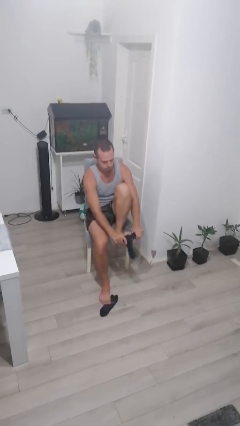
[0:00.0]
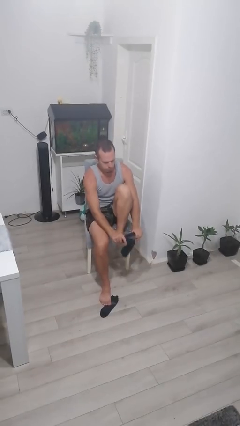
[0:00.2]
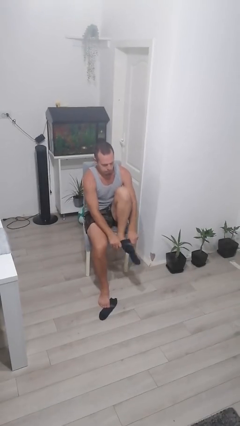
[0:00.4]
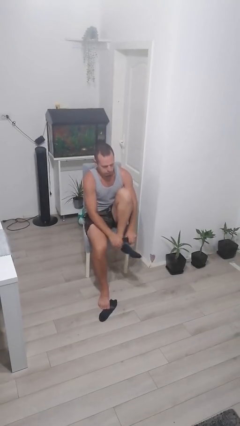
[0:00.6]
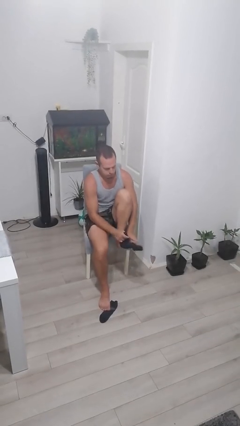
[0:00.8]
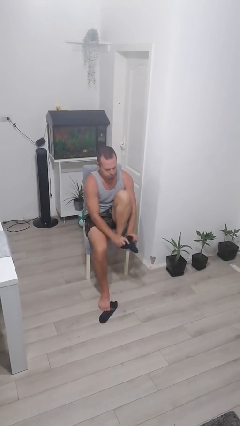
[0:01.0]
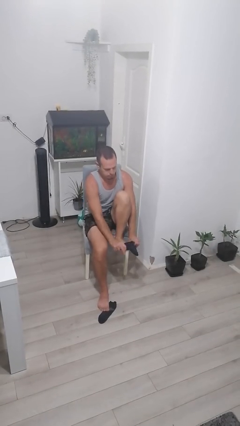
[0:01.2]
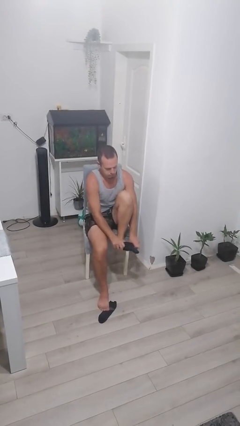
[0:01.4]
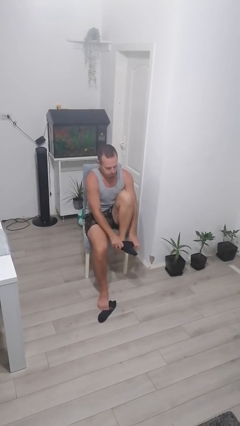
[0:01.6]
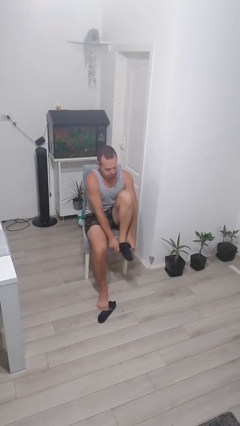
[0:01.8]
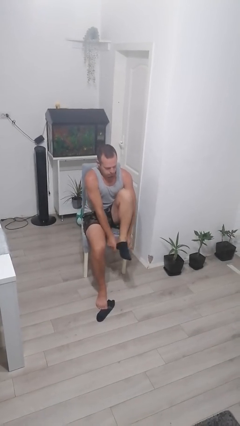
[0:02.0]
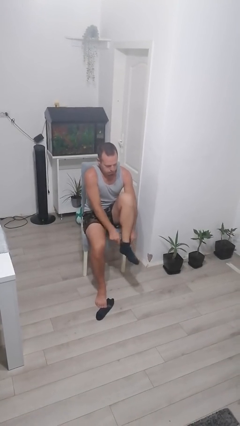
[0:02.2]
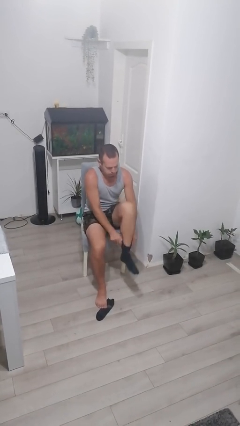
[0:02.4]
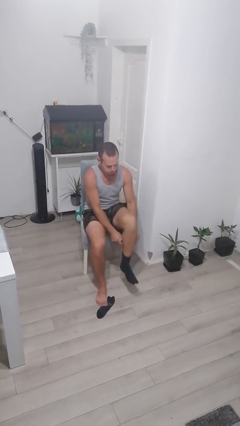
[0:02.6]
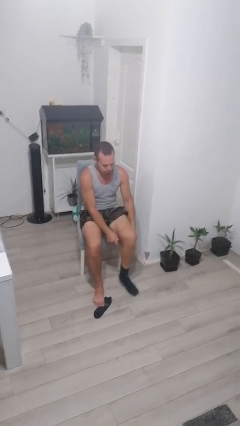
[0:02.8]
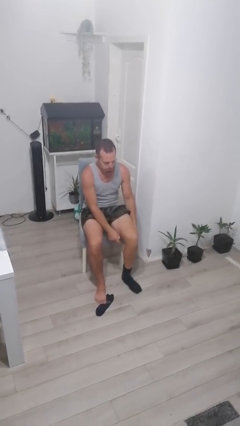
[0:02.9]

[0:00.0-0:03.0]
person puts on socks

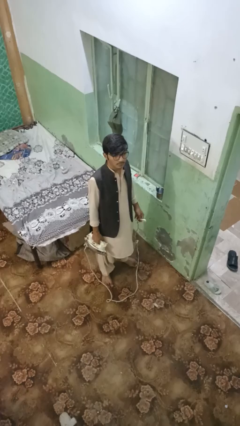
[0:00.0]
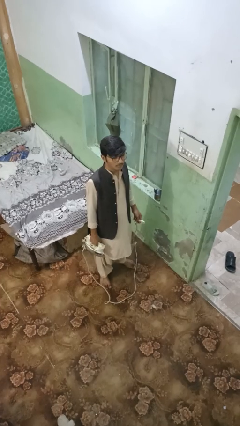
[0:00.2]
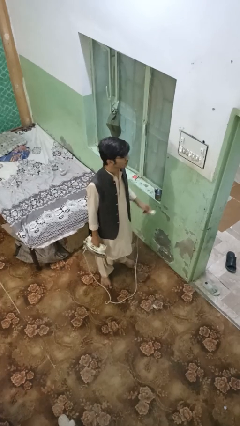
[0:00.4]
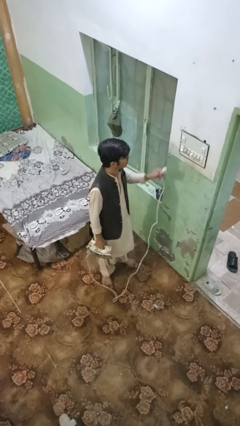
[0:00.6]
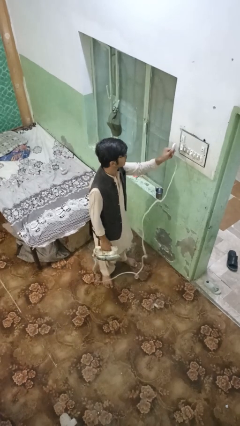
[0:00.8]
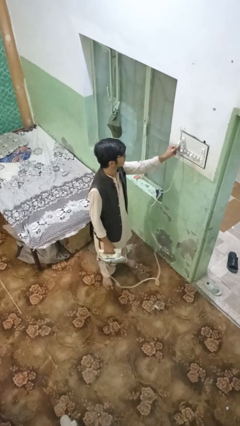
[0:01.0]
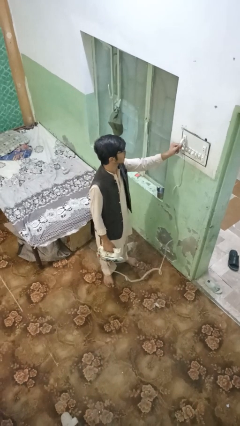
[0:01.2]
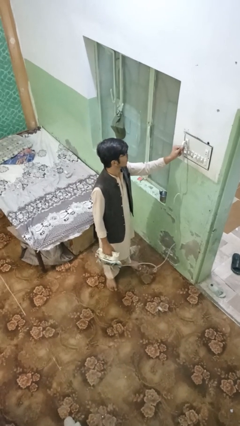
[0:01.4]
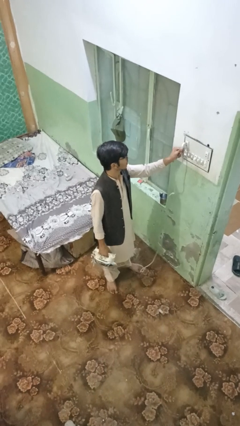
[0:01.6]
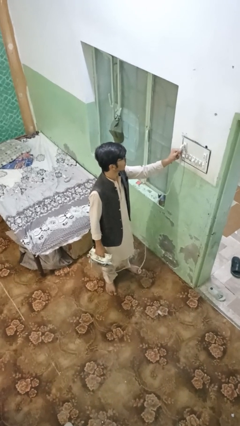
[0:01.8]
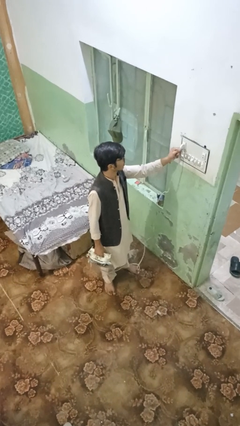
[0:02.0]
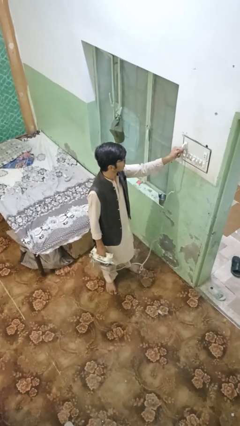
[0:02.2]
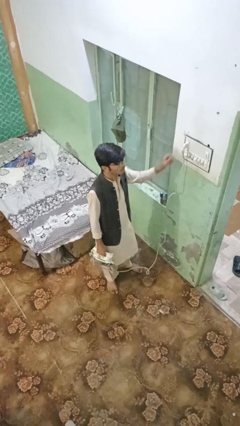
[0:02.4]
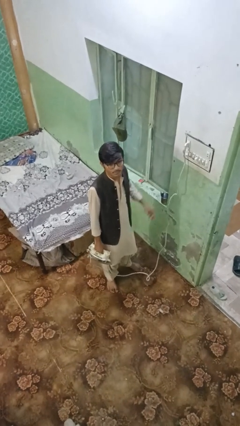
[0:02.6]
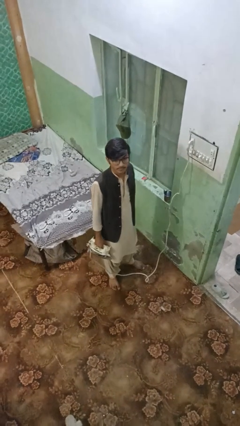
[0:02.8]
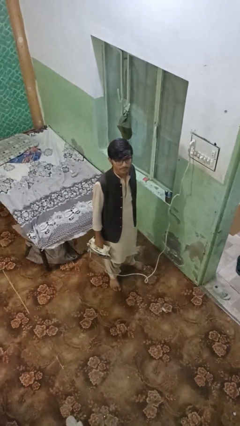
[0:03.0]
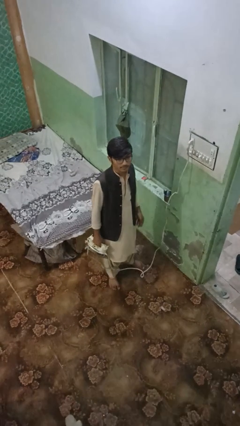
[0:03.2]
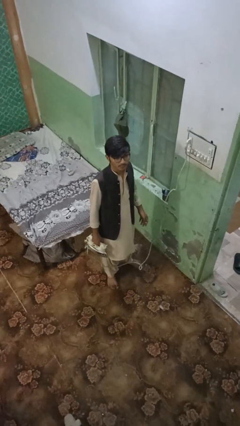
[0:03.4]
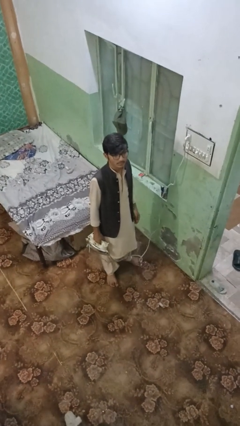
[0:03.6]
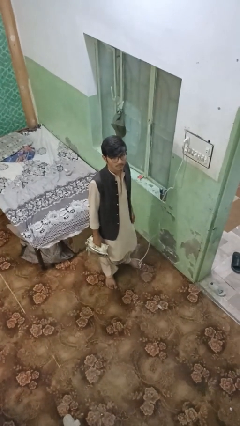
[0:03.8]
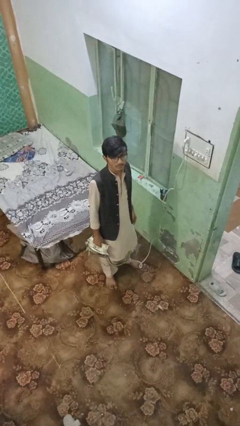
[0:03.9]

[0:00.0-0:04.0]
person plugs into electrical socket

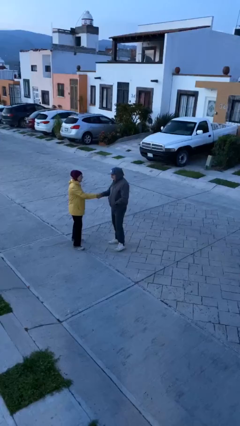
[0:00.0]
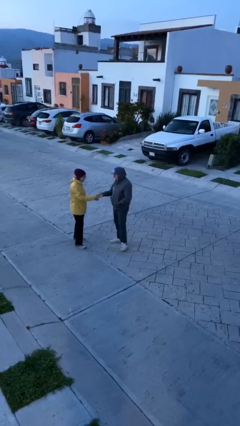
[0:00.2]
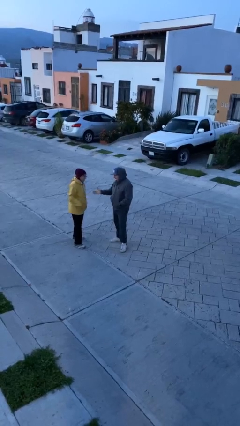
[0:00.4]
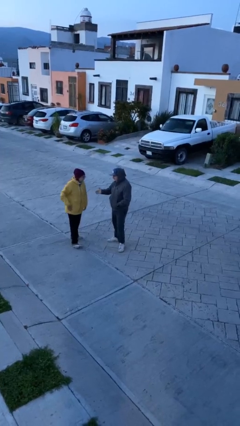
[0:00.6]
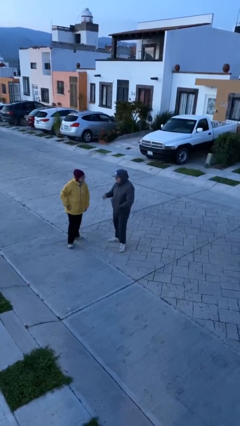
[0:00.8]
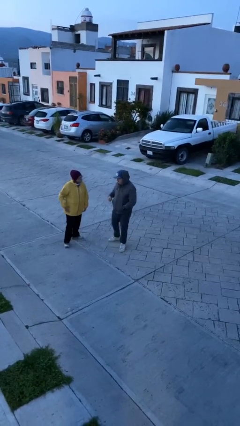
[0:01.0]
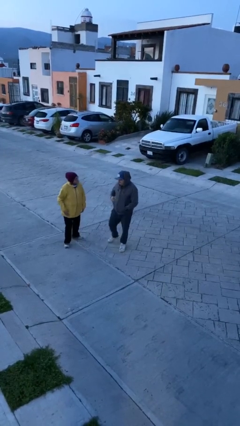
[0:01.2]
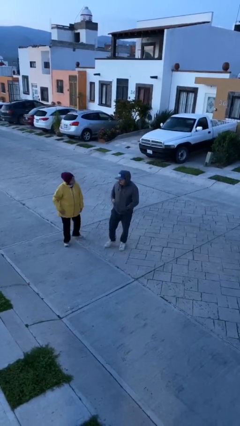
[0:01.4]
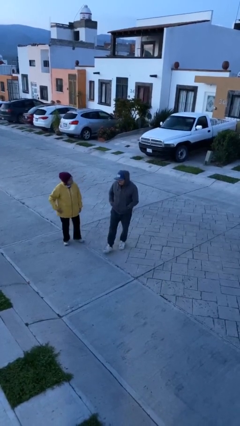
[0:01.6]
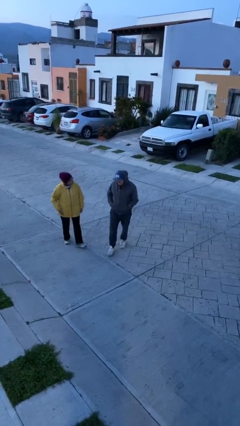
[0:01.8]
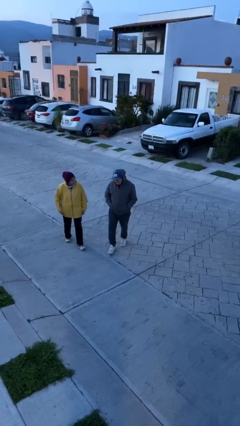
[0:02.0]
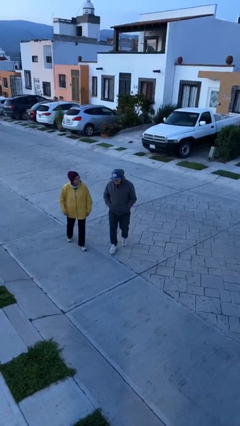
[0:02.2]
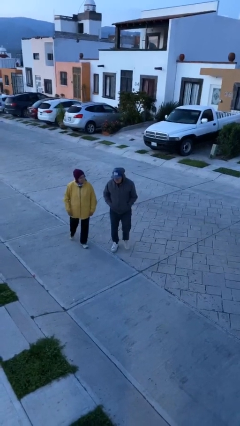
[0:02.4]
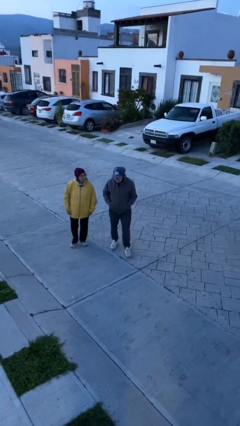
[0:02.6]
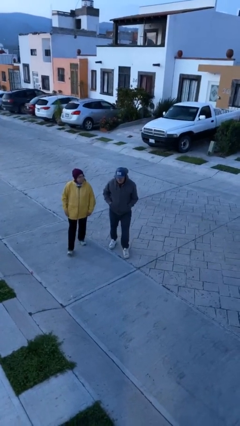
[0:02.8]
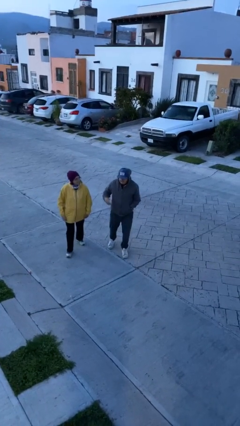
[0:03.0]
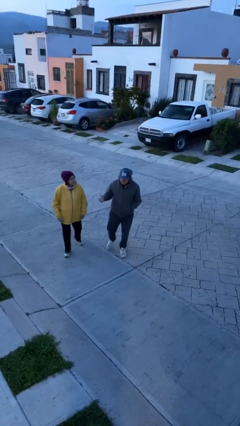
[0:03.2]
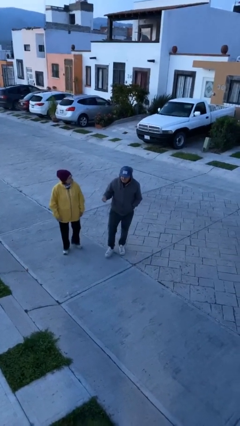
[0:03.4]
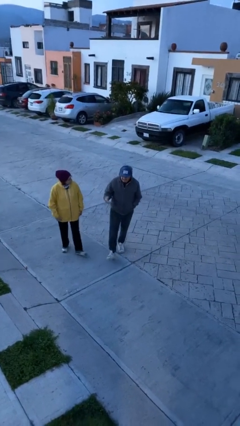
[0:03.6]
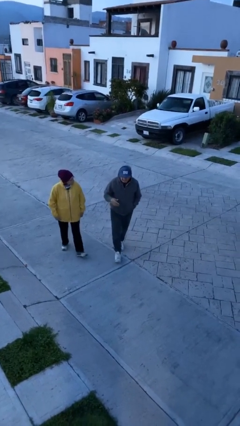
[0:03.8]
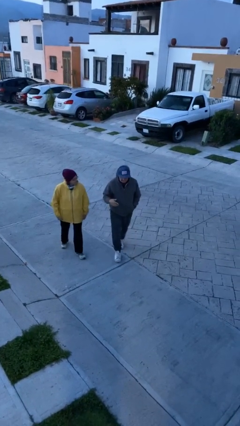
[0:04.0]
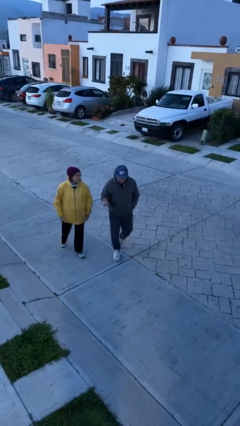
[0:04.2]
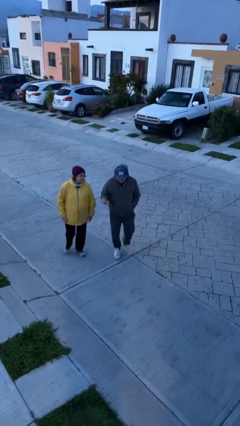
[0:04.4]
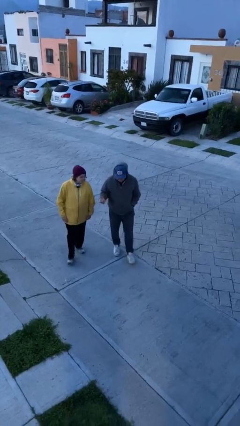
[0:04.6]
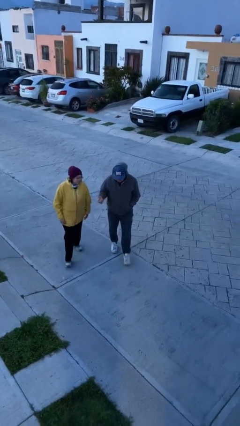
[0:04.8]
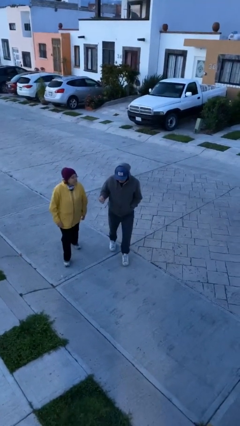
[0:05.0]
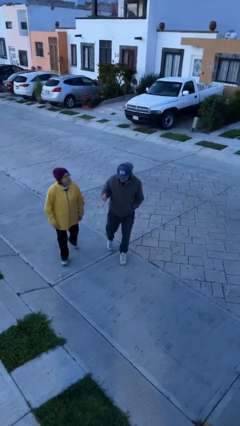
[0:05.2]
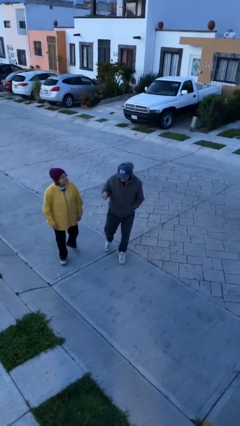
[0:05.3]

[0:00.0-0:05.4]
person talks to person

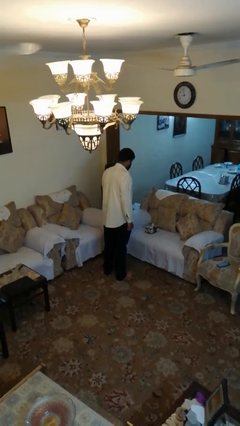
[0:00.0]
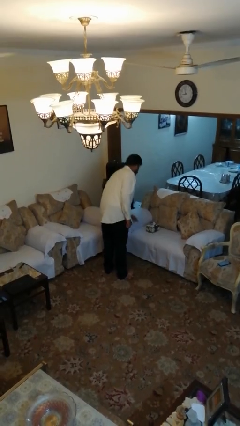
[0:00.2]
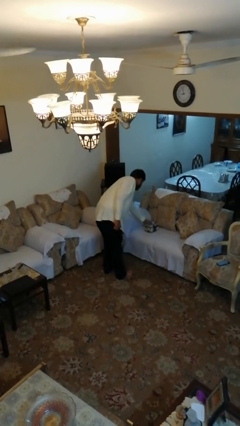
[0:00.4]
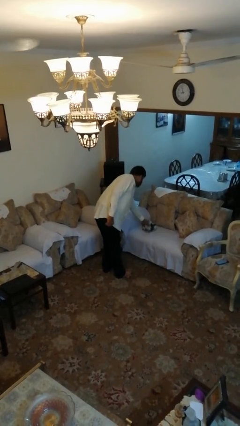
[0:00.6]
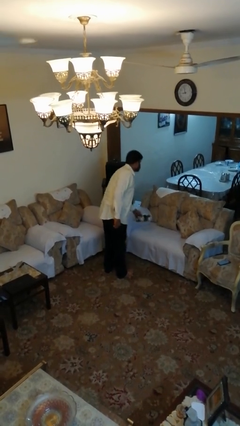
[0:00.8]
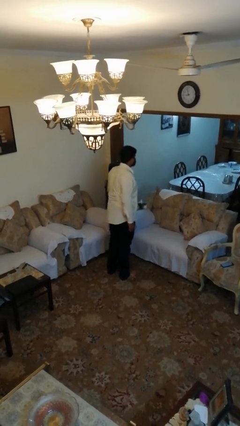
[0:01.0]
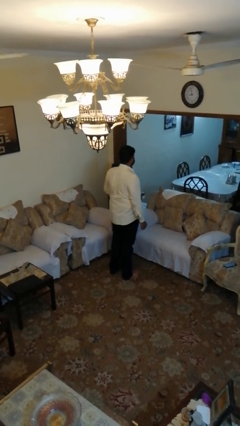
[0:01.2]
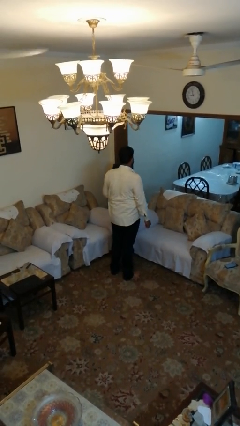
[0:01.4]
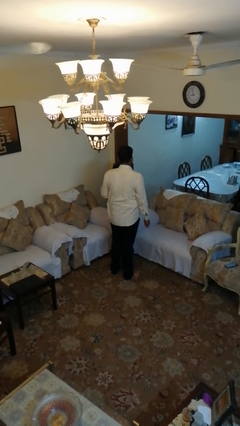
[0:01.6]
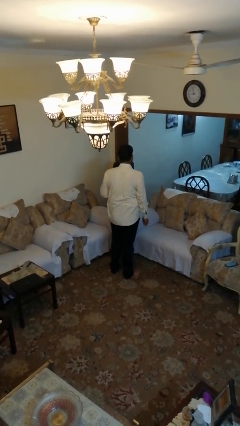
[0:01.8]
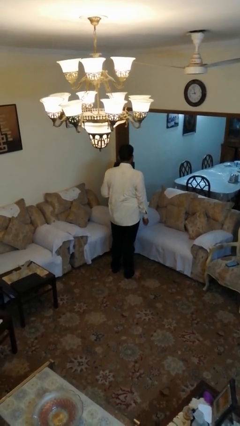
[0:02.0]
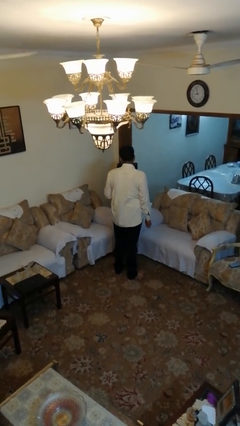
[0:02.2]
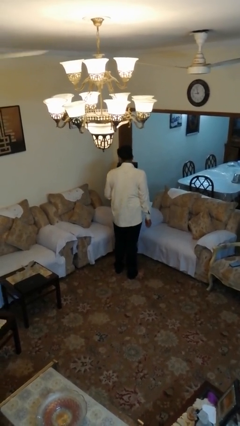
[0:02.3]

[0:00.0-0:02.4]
person picks up object from couch

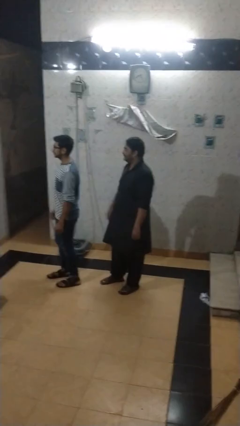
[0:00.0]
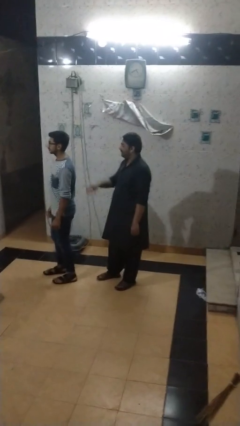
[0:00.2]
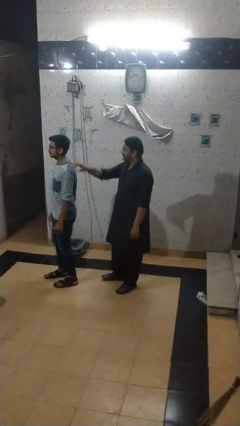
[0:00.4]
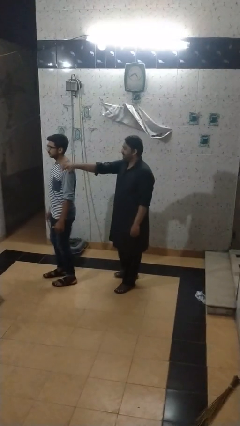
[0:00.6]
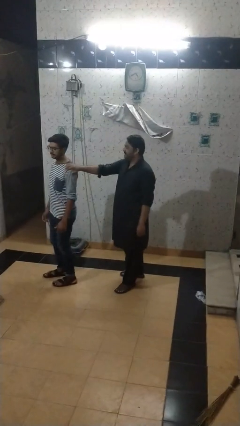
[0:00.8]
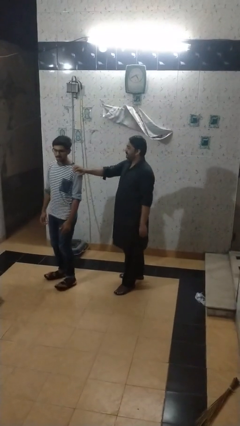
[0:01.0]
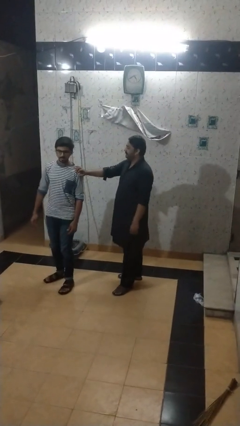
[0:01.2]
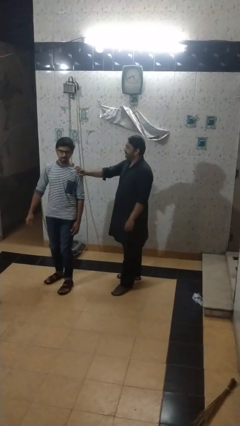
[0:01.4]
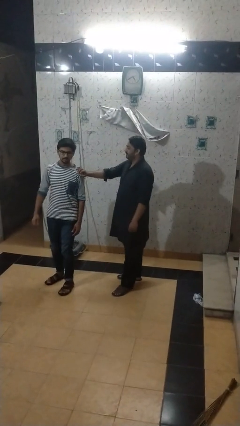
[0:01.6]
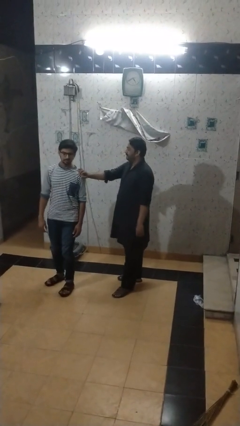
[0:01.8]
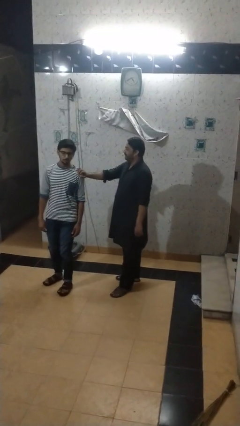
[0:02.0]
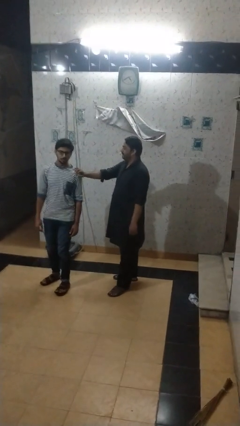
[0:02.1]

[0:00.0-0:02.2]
person grabs person by shoulder

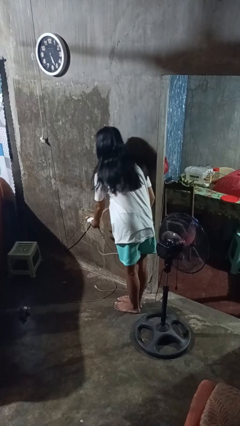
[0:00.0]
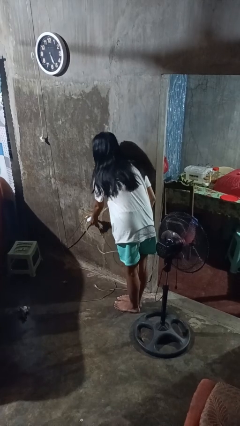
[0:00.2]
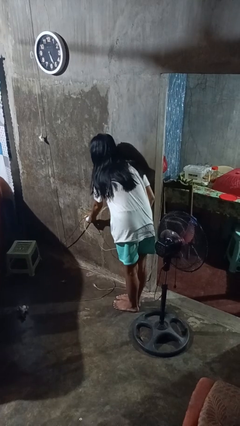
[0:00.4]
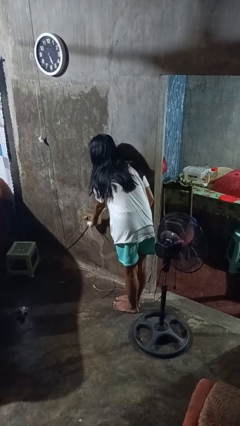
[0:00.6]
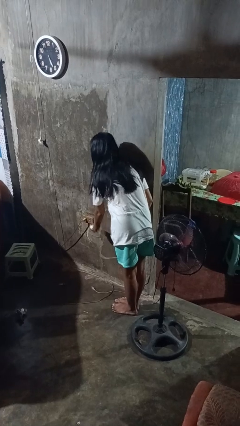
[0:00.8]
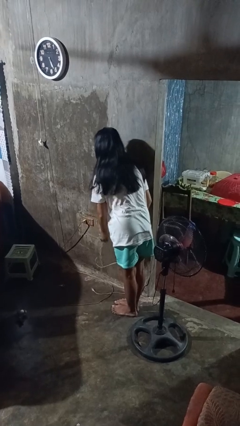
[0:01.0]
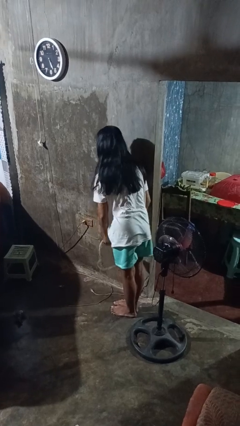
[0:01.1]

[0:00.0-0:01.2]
person unplugs from electrical socket
